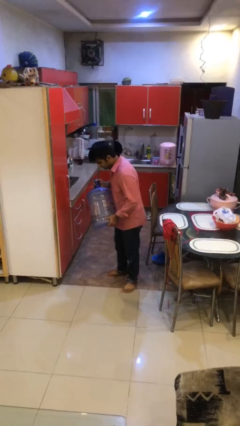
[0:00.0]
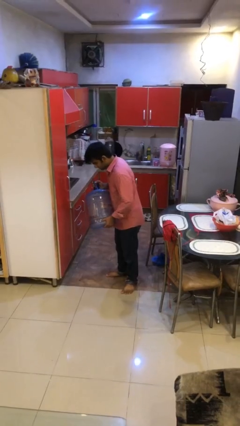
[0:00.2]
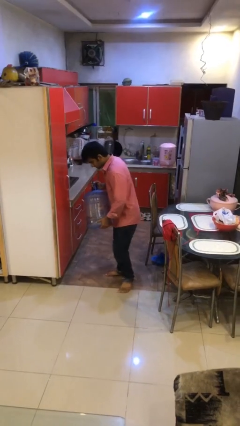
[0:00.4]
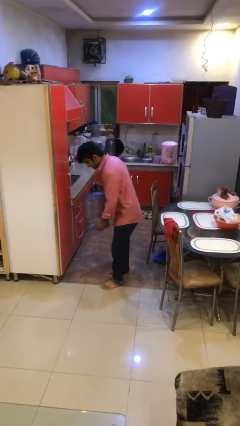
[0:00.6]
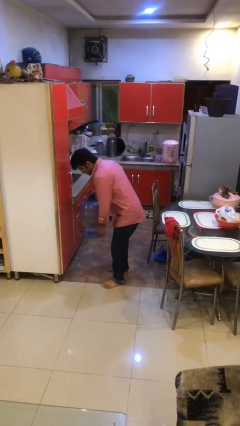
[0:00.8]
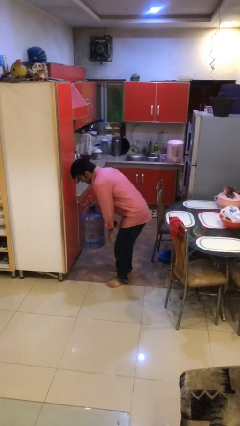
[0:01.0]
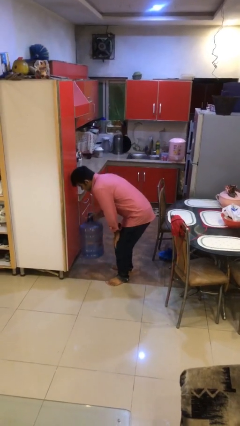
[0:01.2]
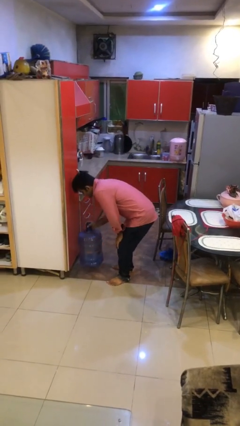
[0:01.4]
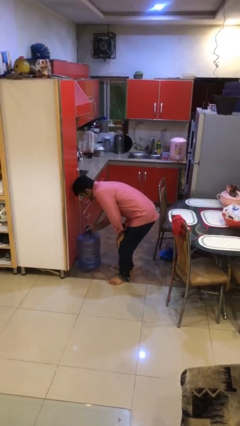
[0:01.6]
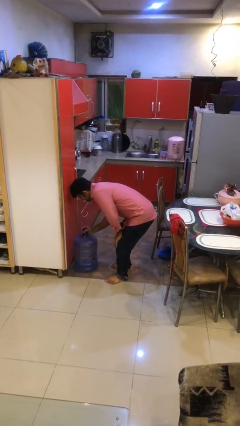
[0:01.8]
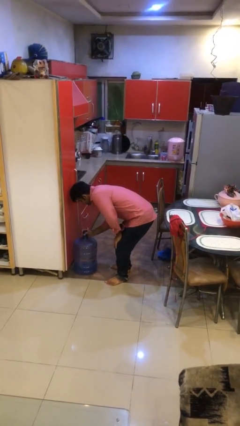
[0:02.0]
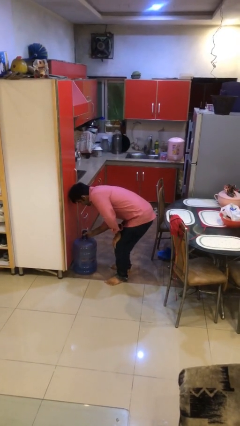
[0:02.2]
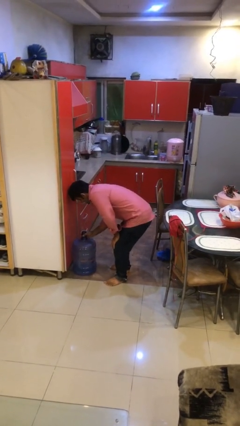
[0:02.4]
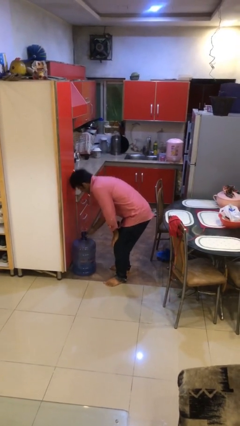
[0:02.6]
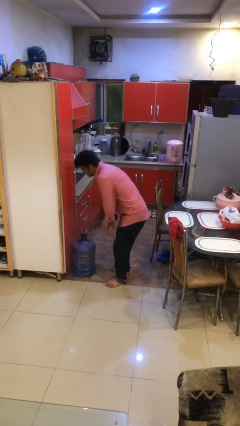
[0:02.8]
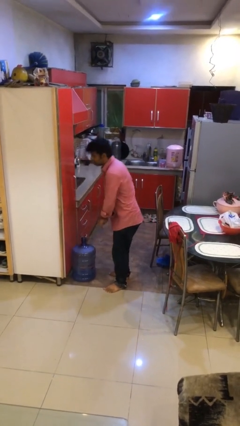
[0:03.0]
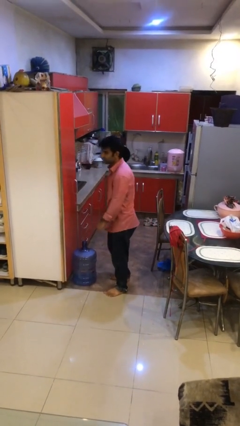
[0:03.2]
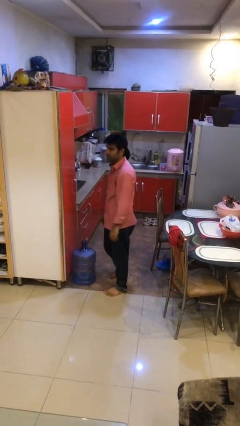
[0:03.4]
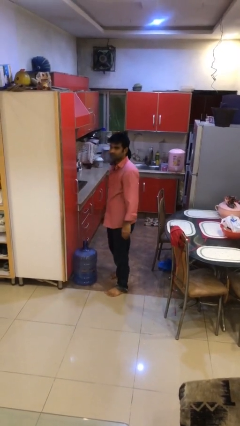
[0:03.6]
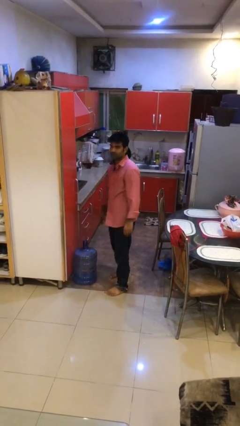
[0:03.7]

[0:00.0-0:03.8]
person puts down object on floor

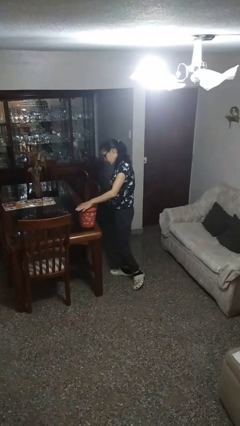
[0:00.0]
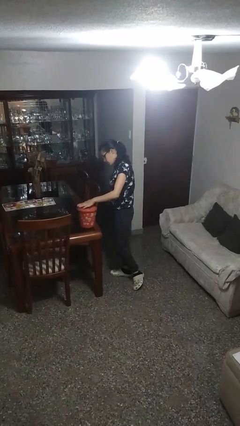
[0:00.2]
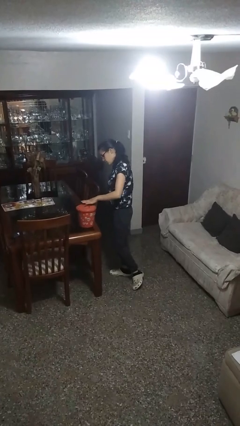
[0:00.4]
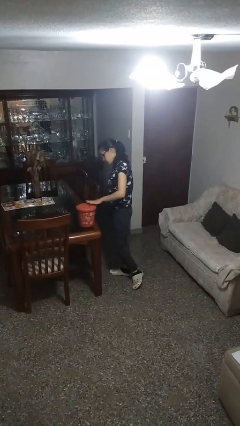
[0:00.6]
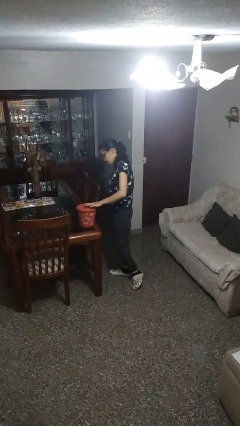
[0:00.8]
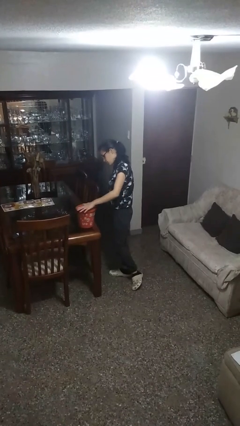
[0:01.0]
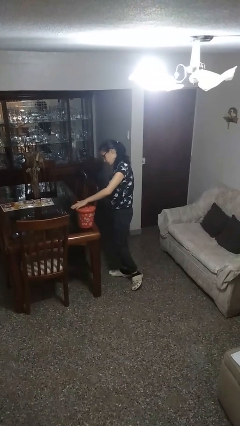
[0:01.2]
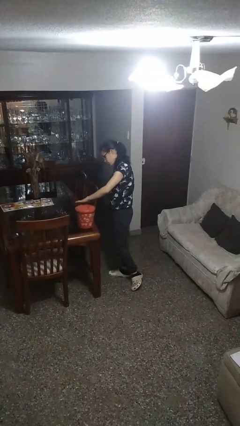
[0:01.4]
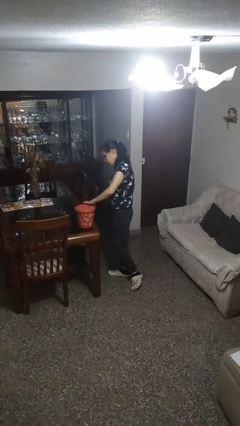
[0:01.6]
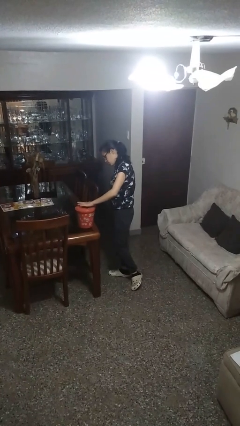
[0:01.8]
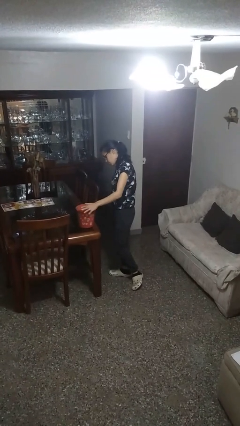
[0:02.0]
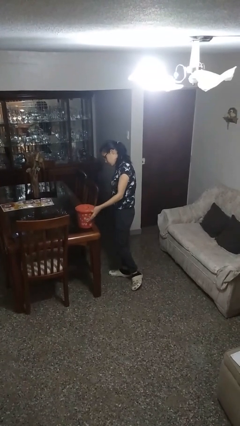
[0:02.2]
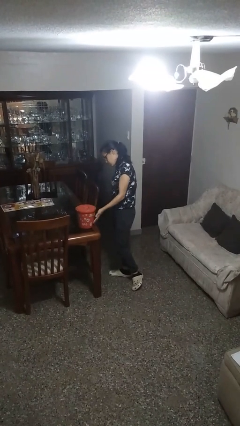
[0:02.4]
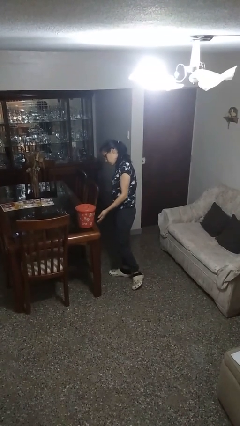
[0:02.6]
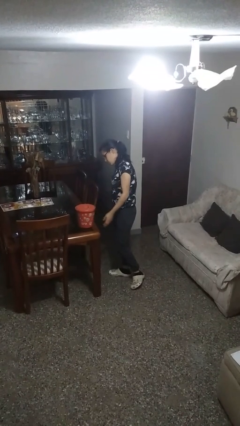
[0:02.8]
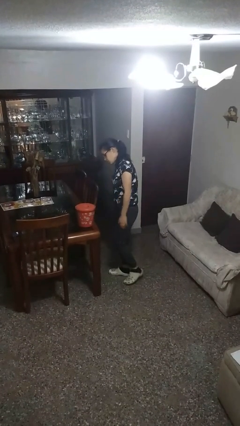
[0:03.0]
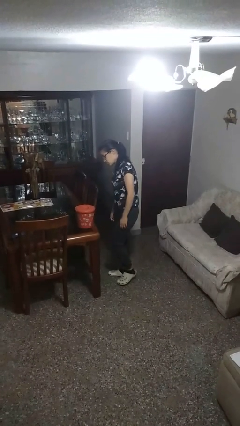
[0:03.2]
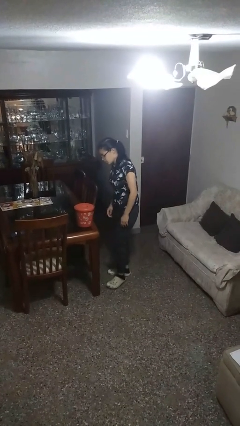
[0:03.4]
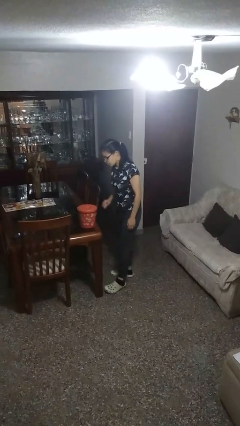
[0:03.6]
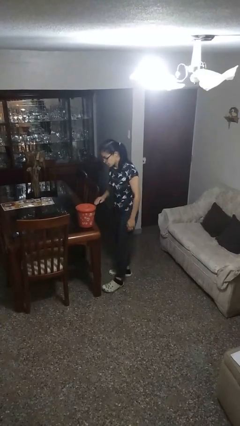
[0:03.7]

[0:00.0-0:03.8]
person waves hand over object

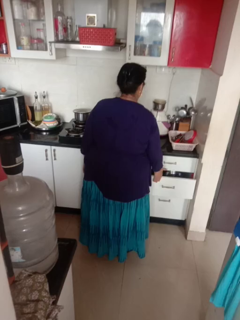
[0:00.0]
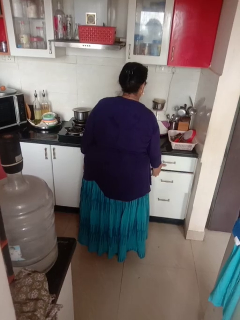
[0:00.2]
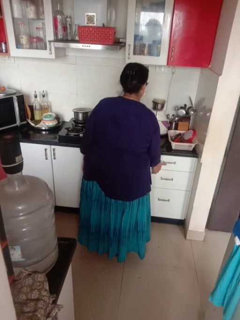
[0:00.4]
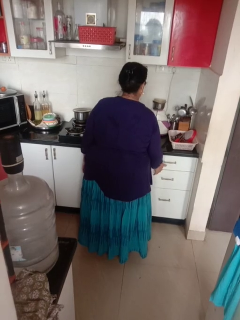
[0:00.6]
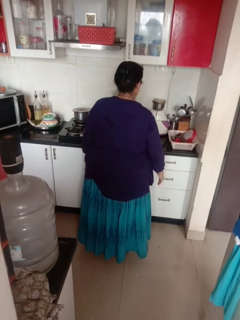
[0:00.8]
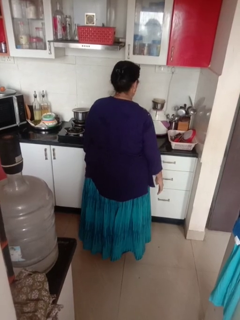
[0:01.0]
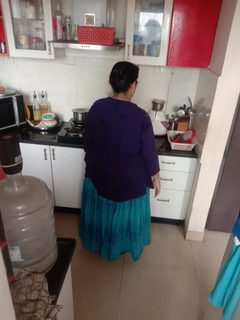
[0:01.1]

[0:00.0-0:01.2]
person closes kitchen drawer

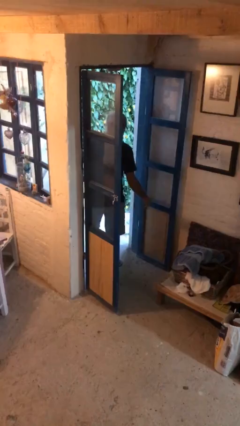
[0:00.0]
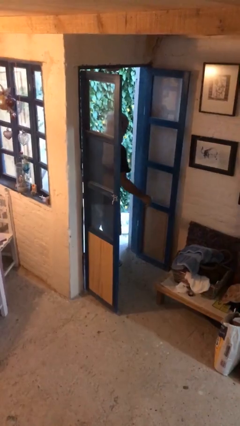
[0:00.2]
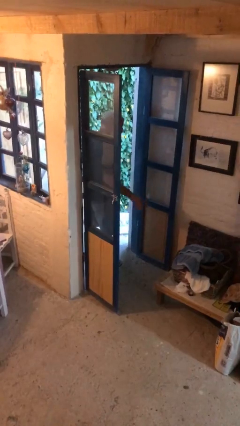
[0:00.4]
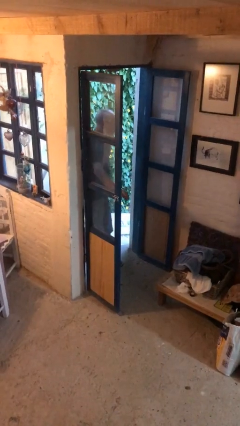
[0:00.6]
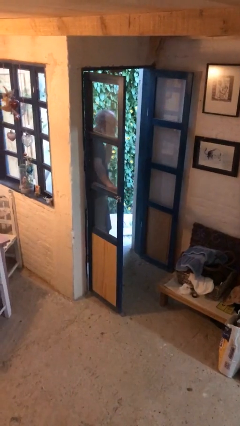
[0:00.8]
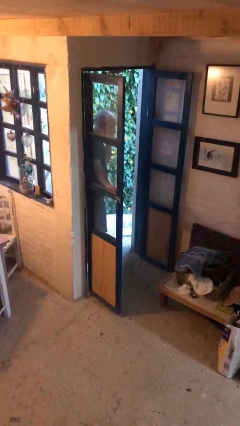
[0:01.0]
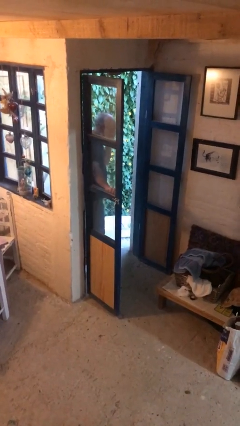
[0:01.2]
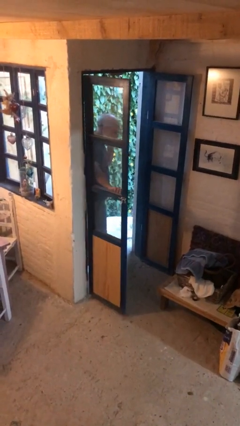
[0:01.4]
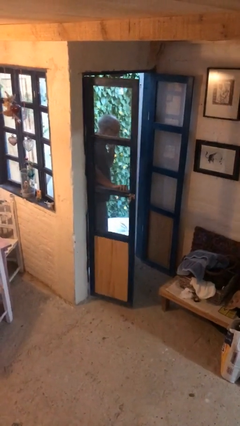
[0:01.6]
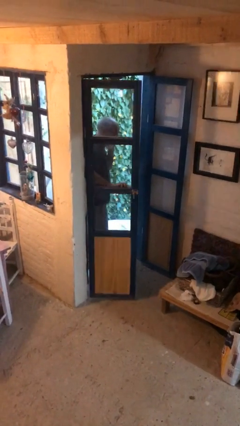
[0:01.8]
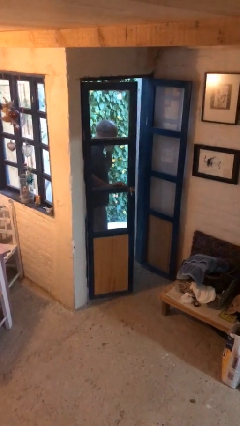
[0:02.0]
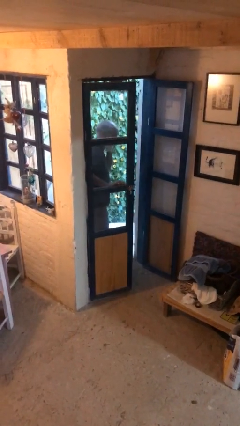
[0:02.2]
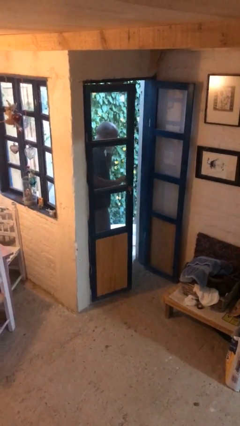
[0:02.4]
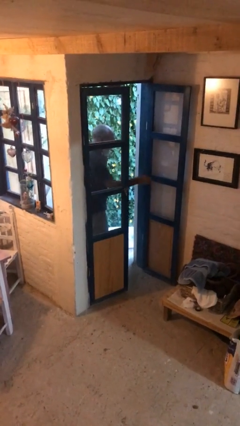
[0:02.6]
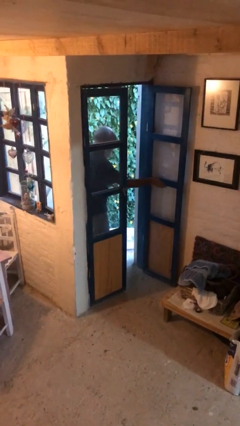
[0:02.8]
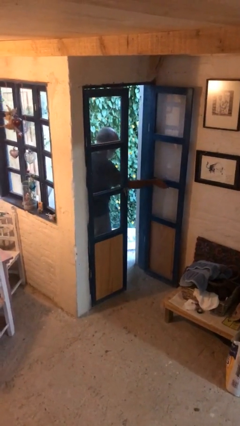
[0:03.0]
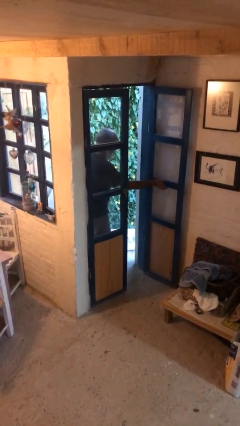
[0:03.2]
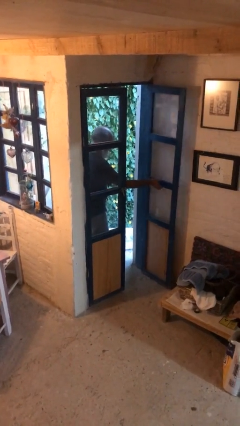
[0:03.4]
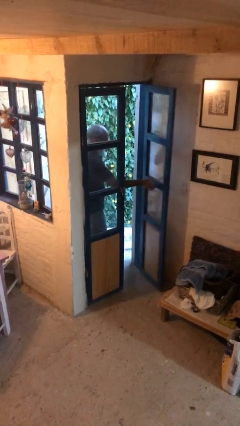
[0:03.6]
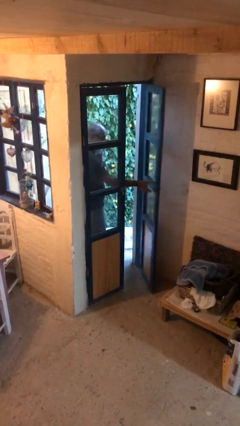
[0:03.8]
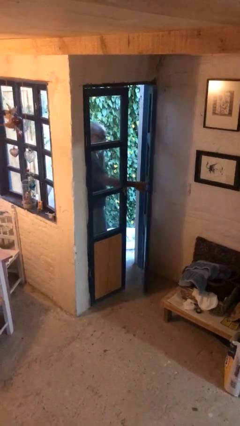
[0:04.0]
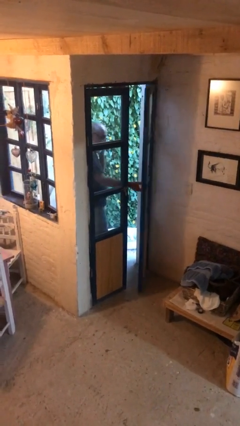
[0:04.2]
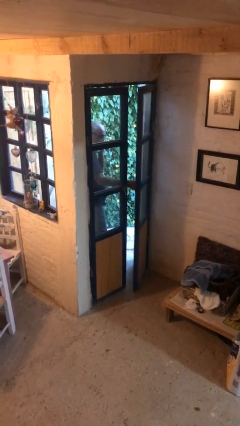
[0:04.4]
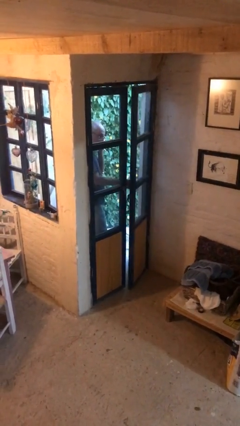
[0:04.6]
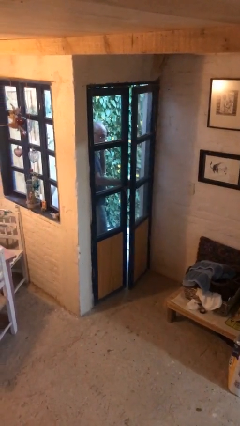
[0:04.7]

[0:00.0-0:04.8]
person closes facility door

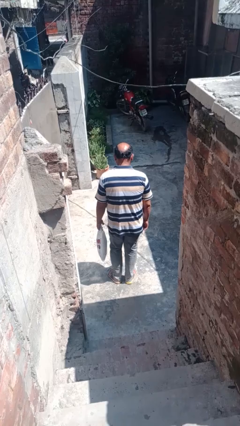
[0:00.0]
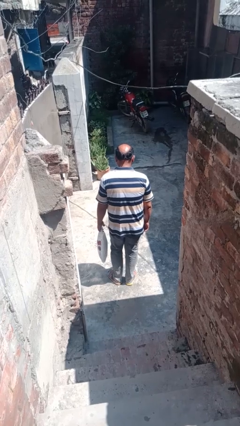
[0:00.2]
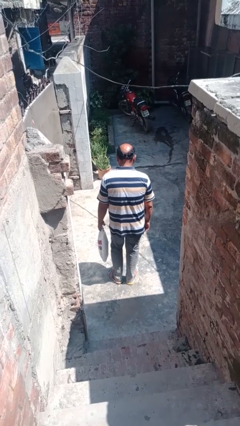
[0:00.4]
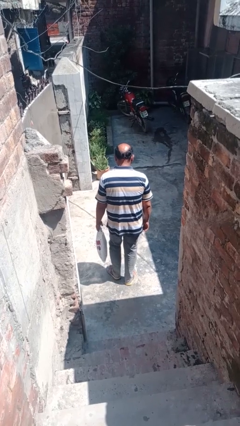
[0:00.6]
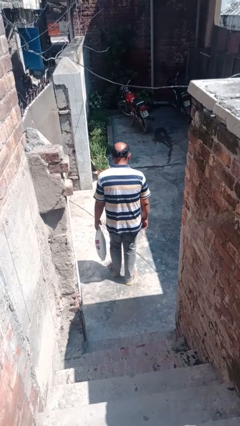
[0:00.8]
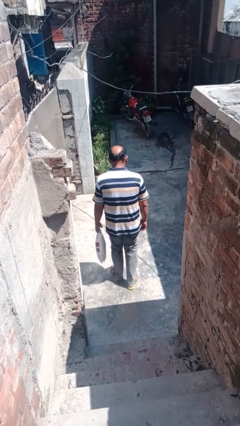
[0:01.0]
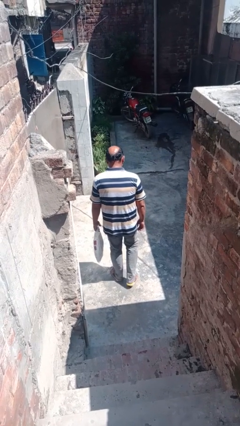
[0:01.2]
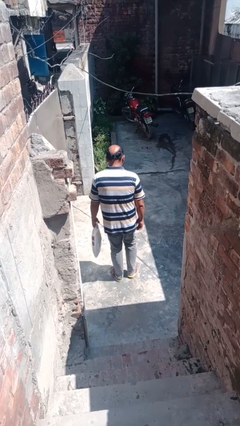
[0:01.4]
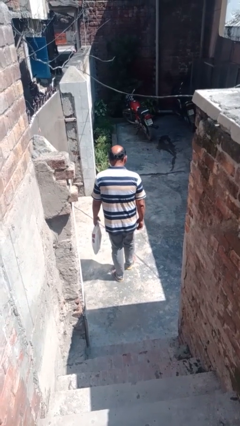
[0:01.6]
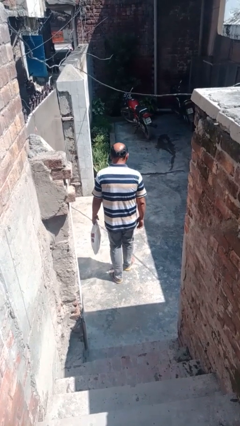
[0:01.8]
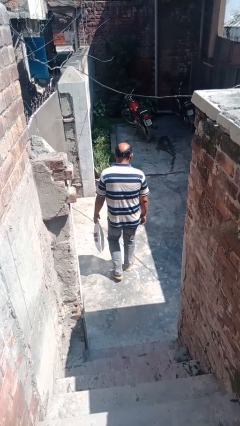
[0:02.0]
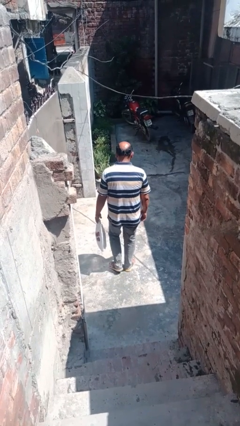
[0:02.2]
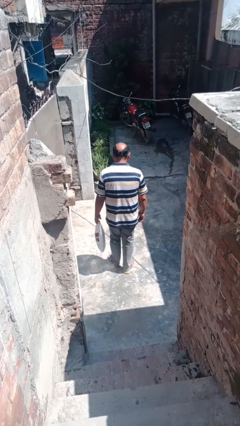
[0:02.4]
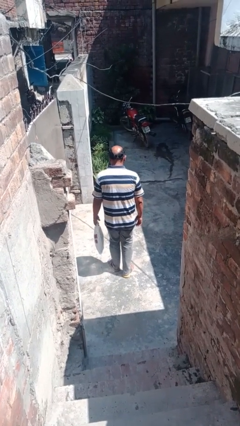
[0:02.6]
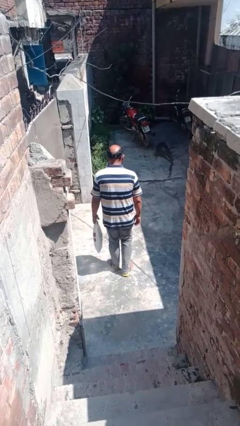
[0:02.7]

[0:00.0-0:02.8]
person carries groceries

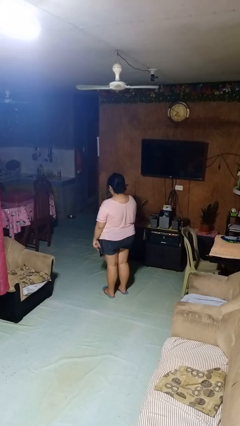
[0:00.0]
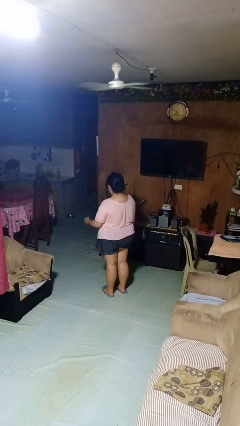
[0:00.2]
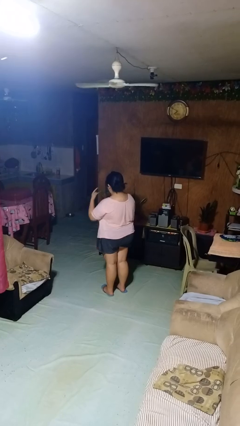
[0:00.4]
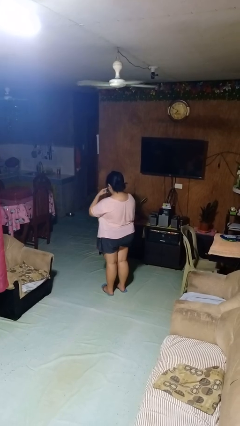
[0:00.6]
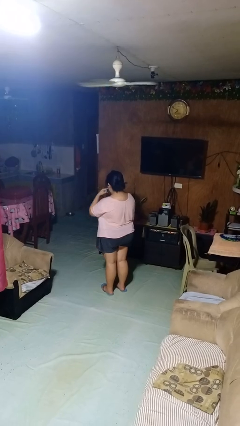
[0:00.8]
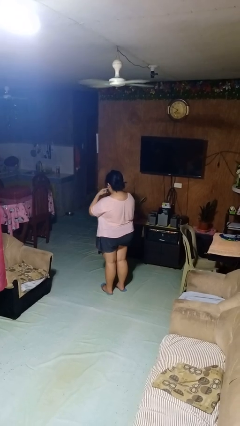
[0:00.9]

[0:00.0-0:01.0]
person licks fingers

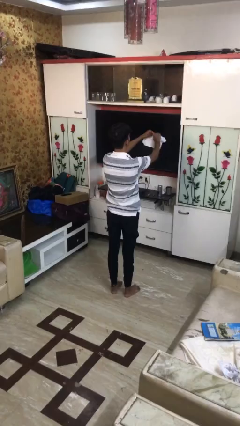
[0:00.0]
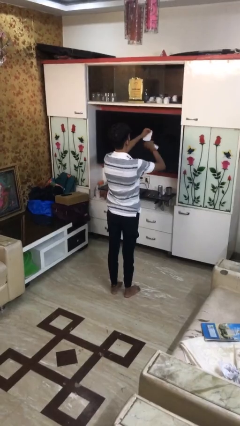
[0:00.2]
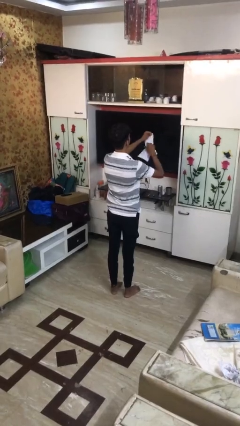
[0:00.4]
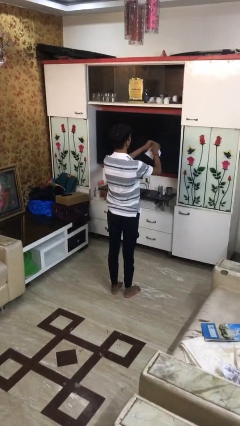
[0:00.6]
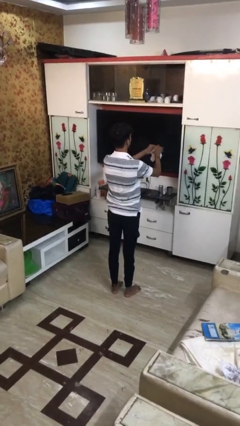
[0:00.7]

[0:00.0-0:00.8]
person tears paper
